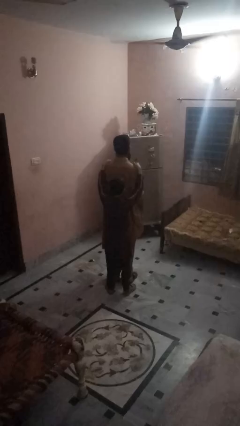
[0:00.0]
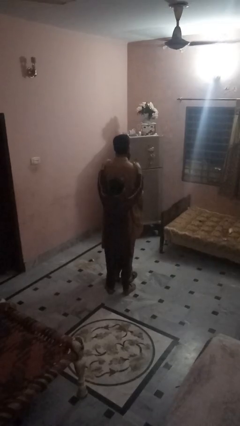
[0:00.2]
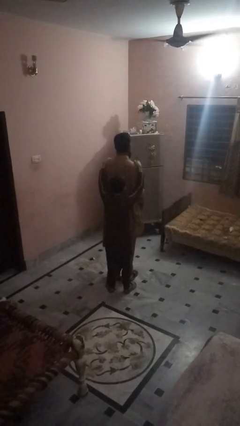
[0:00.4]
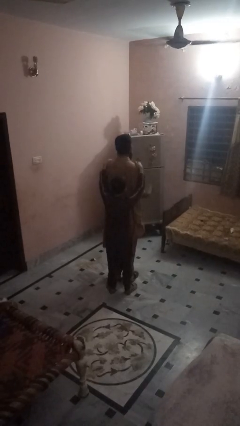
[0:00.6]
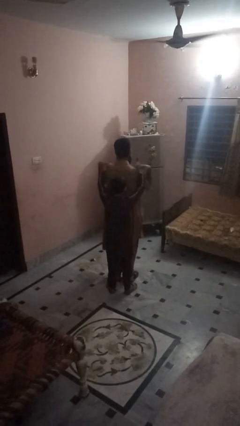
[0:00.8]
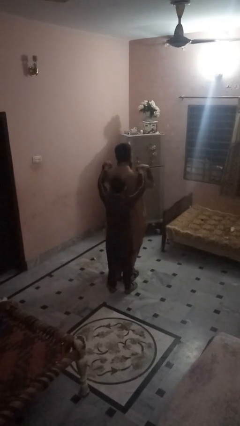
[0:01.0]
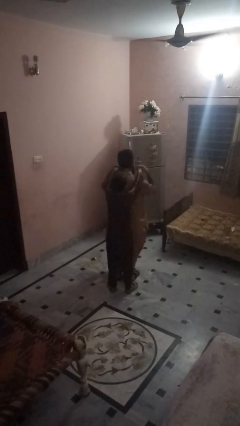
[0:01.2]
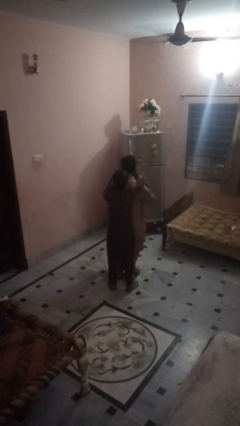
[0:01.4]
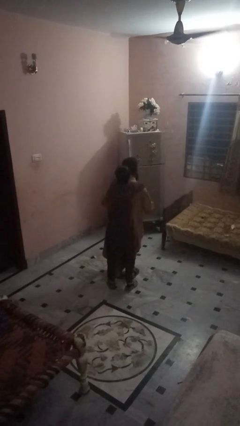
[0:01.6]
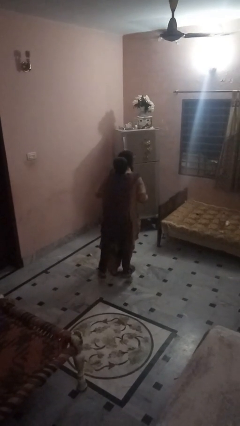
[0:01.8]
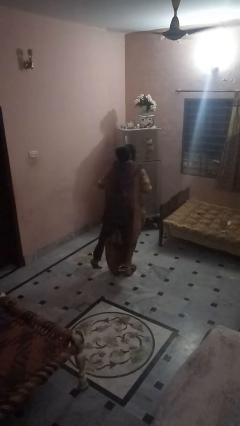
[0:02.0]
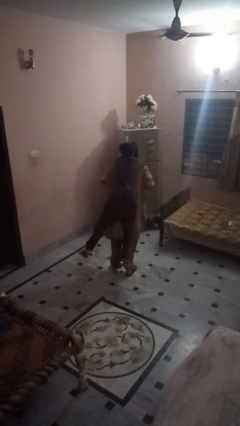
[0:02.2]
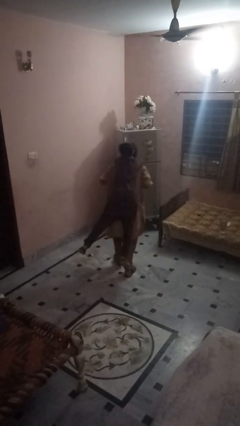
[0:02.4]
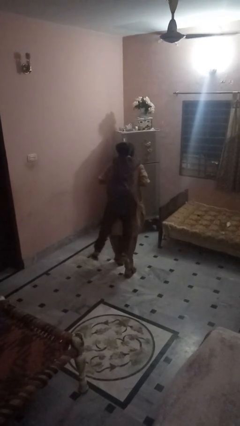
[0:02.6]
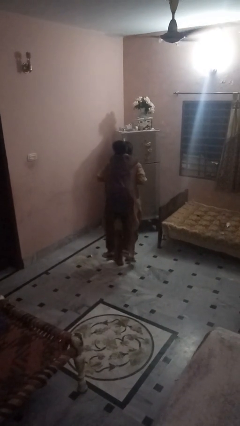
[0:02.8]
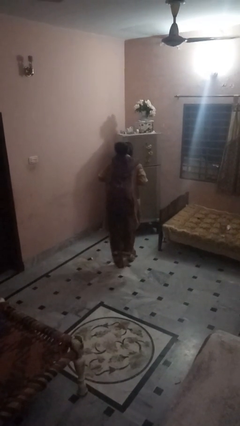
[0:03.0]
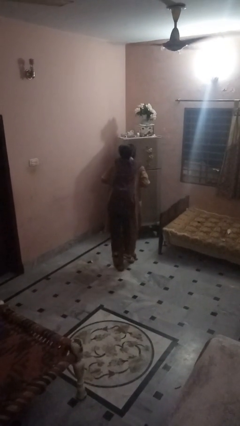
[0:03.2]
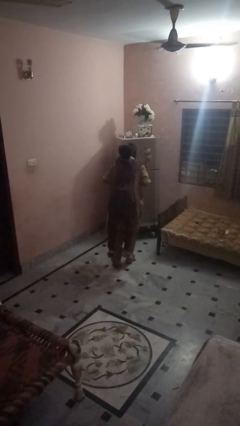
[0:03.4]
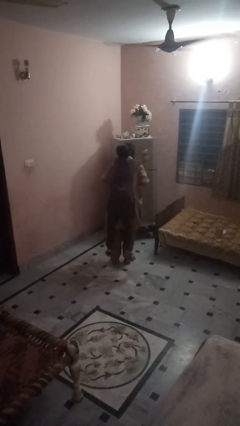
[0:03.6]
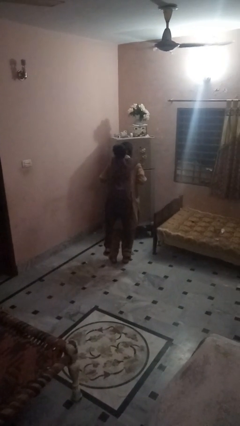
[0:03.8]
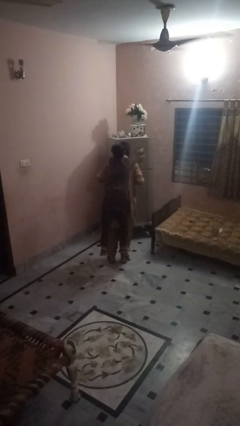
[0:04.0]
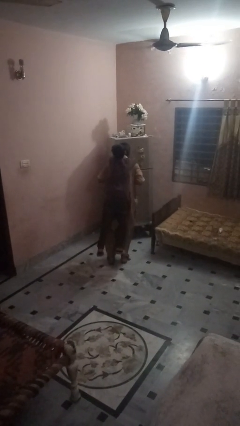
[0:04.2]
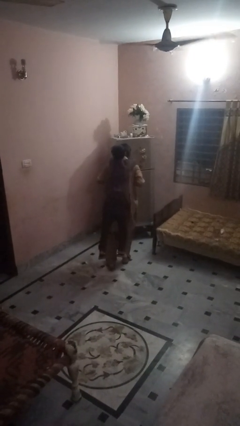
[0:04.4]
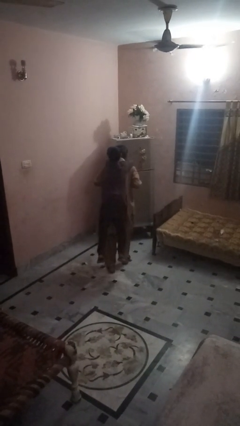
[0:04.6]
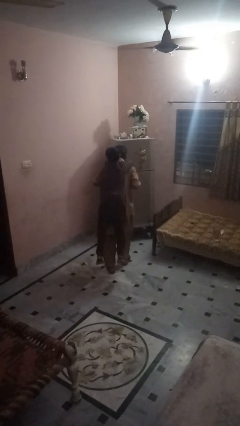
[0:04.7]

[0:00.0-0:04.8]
person carries person on back

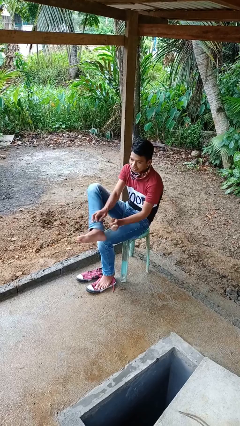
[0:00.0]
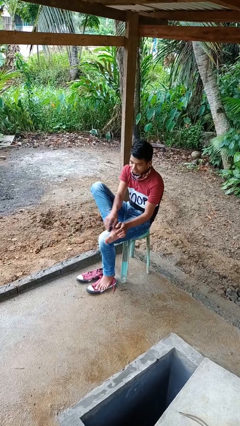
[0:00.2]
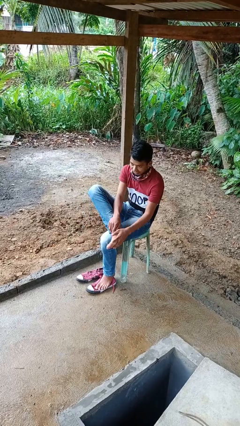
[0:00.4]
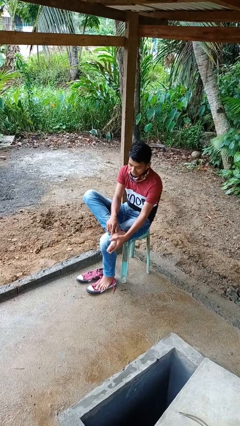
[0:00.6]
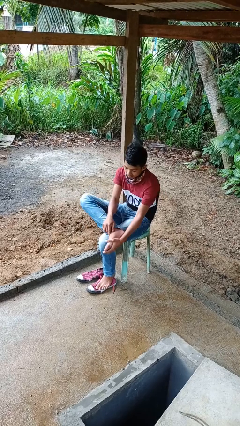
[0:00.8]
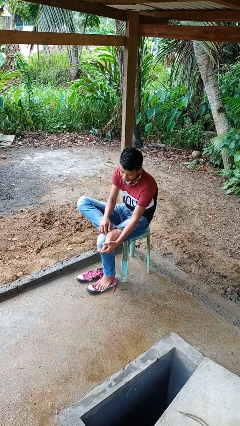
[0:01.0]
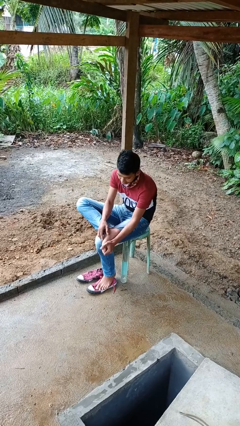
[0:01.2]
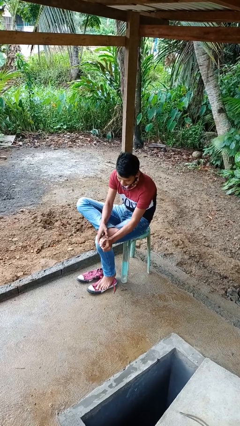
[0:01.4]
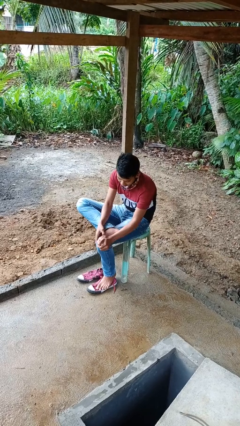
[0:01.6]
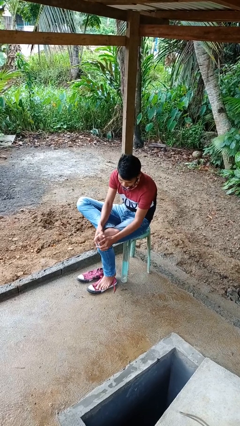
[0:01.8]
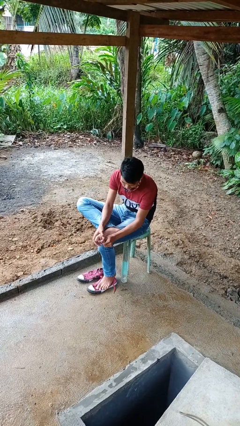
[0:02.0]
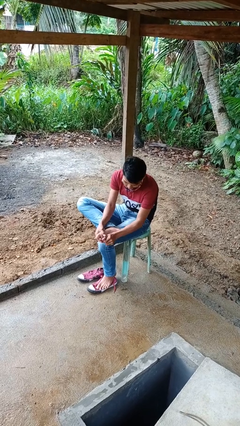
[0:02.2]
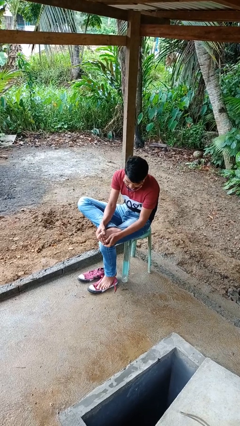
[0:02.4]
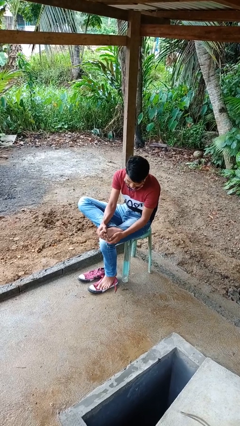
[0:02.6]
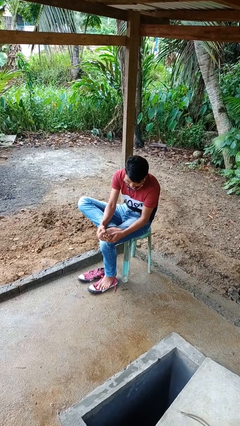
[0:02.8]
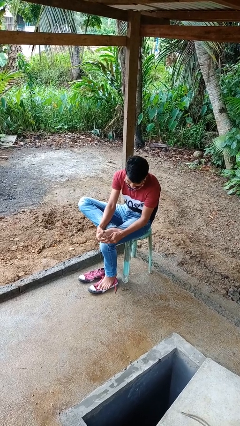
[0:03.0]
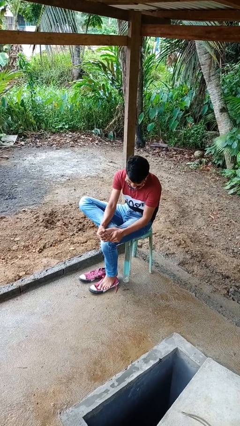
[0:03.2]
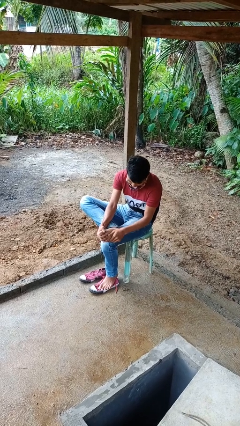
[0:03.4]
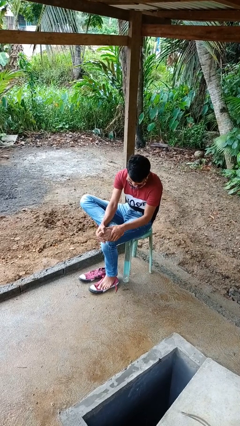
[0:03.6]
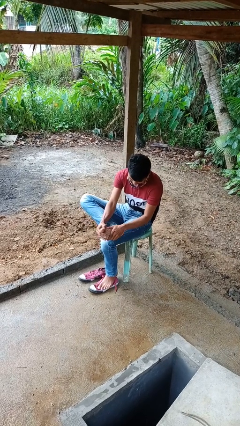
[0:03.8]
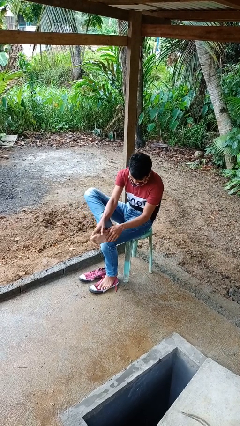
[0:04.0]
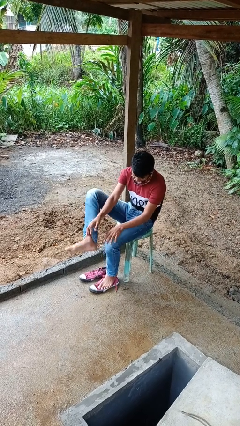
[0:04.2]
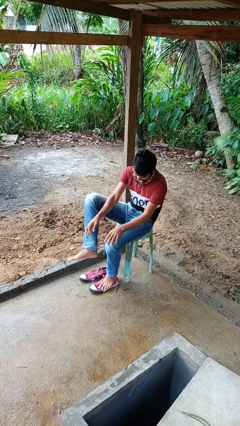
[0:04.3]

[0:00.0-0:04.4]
person rubs foot

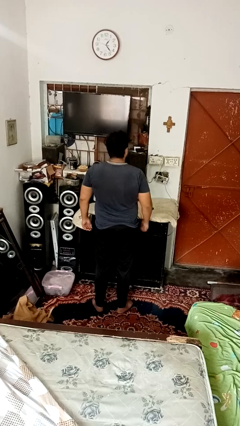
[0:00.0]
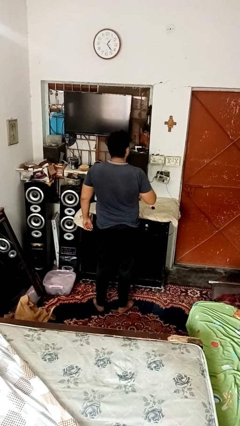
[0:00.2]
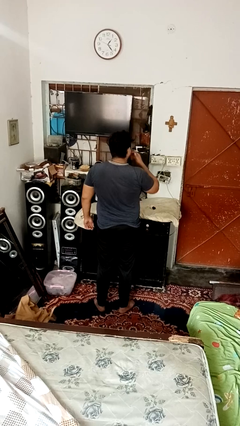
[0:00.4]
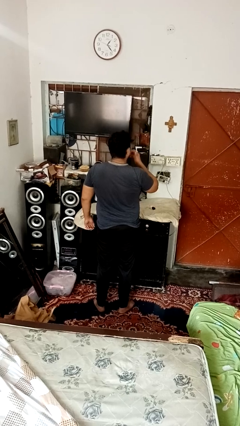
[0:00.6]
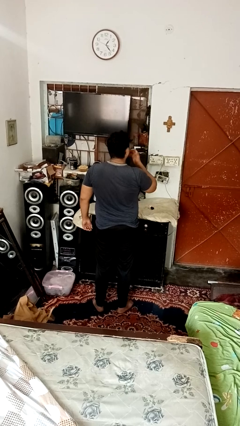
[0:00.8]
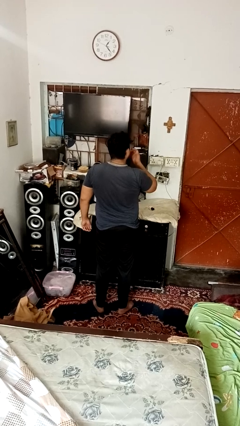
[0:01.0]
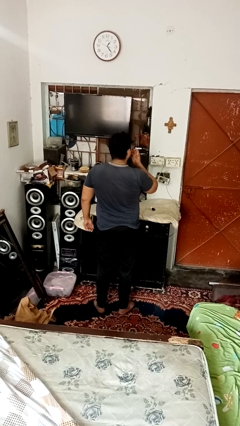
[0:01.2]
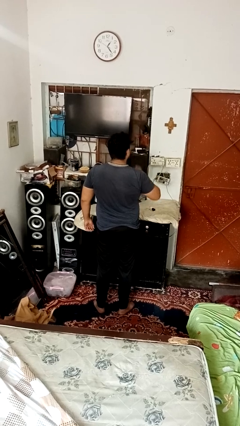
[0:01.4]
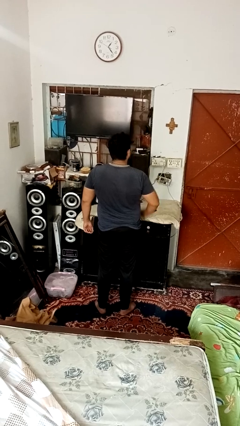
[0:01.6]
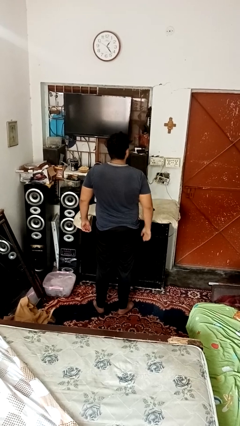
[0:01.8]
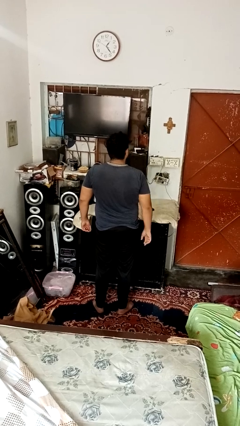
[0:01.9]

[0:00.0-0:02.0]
person licks fingers

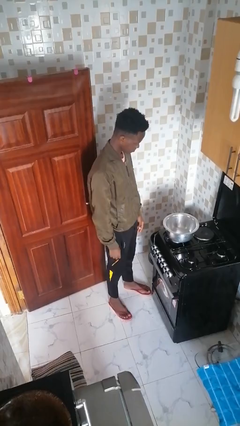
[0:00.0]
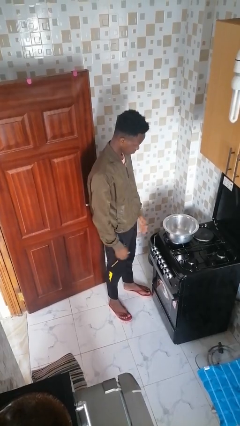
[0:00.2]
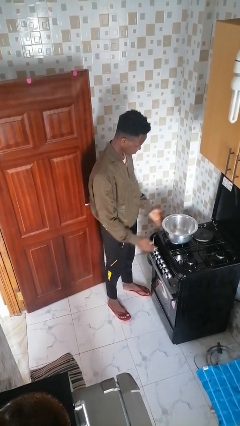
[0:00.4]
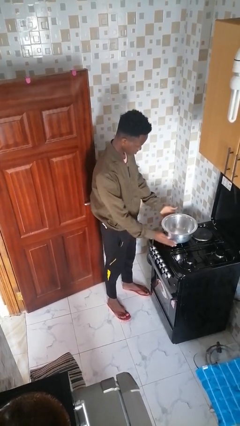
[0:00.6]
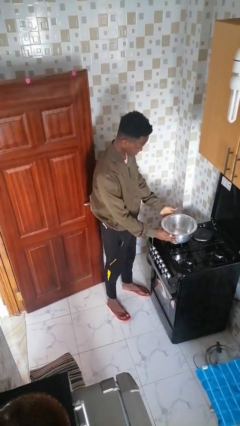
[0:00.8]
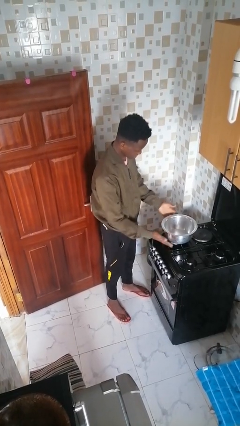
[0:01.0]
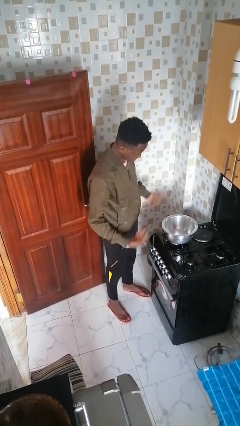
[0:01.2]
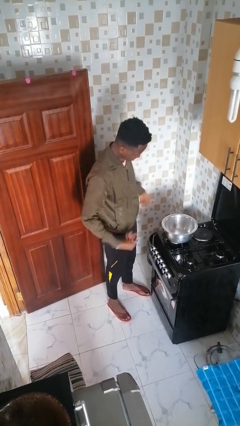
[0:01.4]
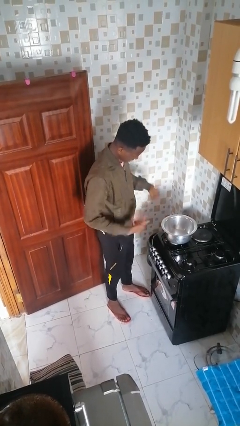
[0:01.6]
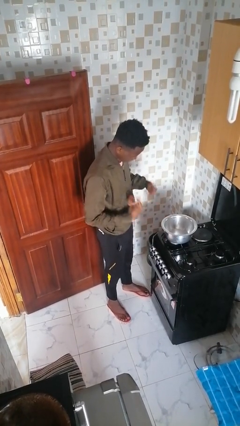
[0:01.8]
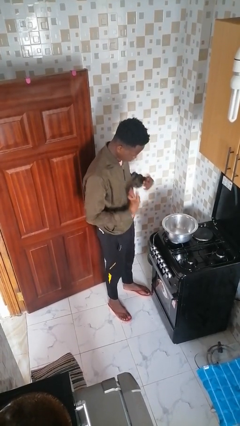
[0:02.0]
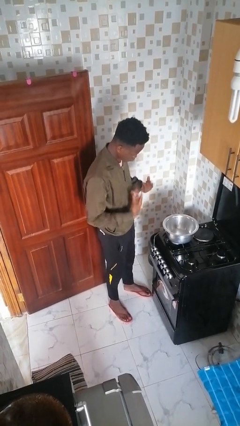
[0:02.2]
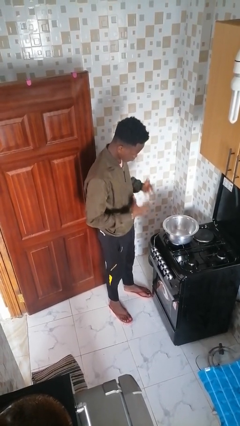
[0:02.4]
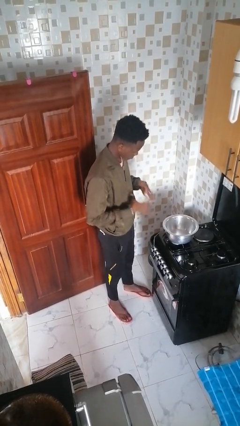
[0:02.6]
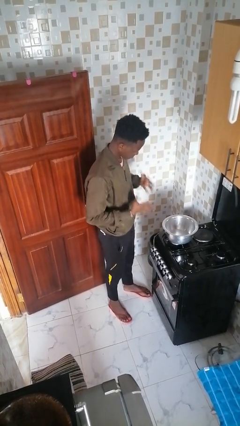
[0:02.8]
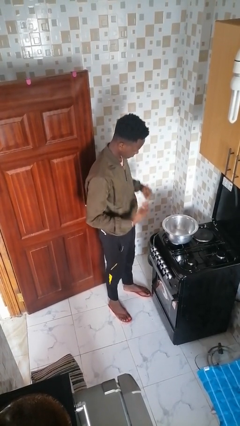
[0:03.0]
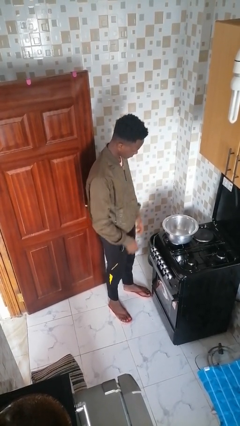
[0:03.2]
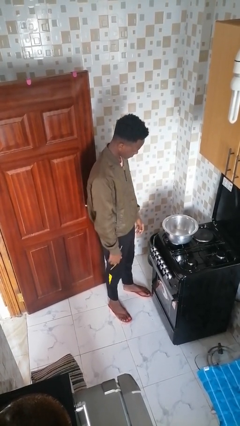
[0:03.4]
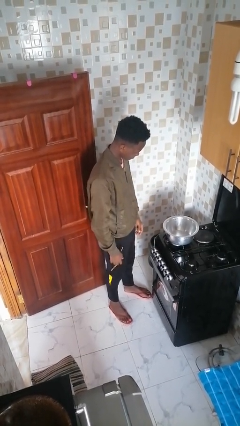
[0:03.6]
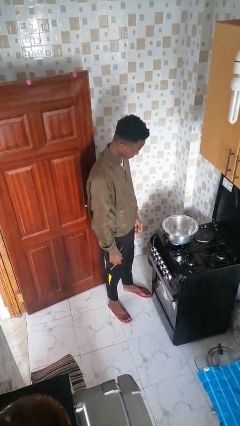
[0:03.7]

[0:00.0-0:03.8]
person burns hand

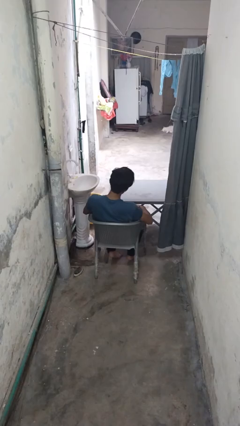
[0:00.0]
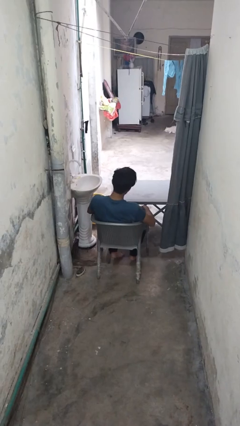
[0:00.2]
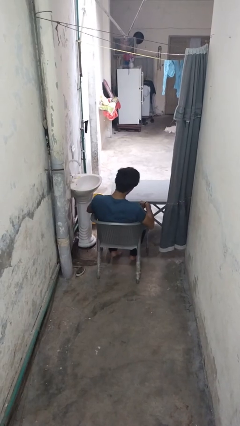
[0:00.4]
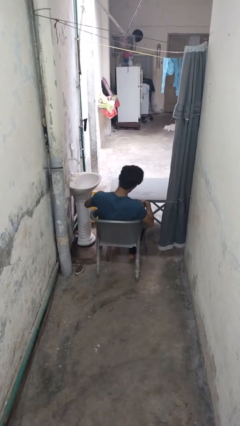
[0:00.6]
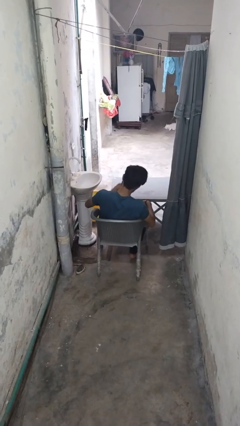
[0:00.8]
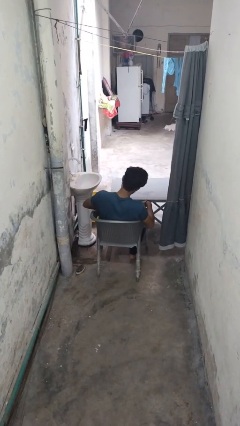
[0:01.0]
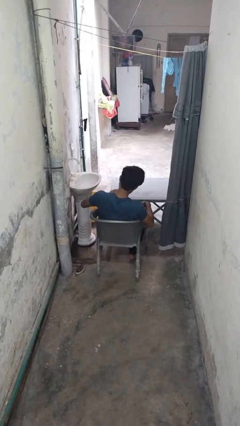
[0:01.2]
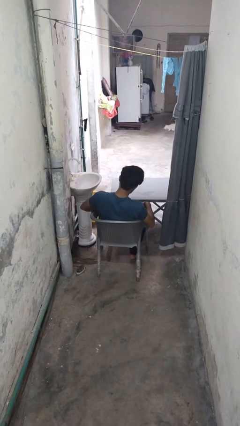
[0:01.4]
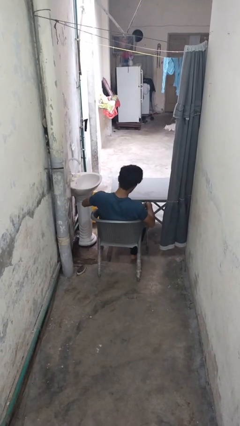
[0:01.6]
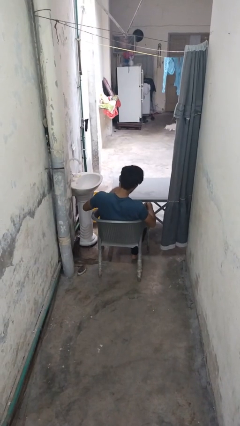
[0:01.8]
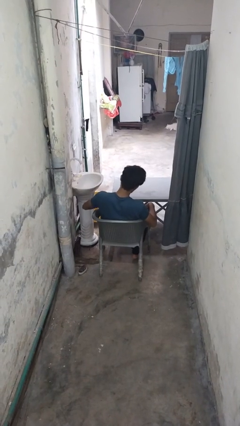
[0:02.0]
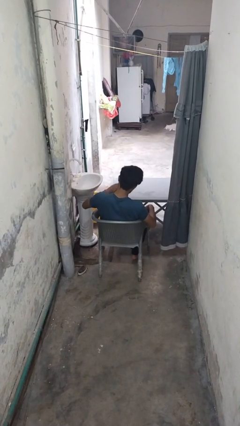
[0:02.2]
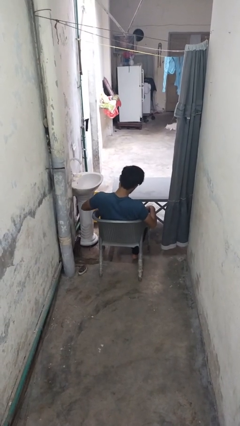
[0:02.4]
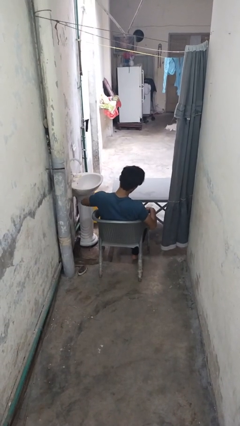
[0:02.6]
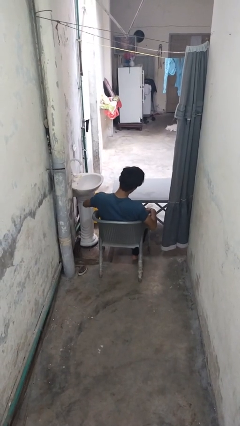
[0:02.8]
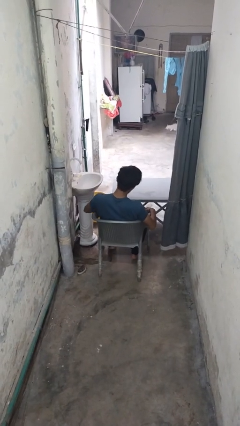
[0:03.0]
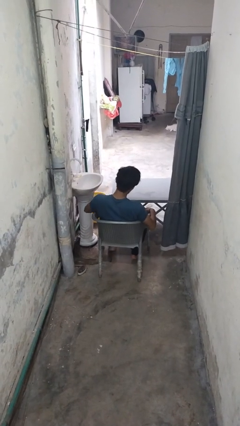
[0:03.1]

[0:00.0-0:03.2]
person slaps hands on thighs
